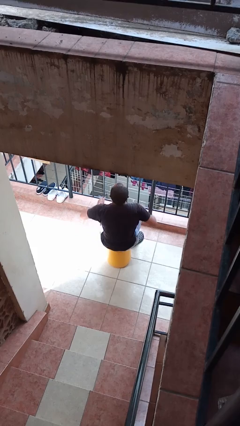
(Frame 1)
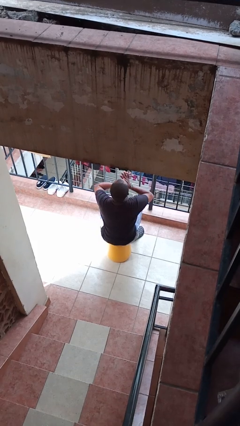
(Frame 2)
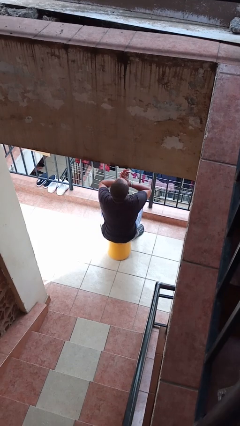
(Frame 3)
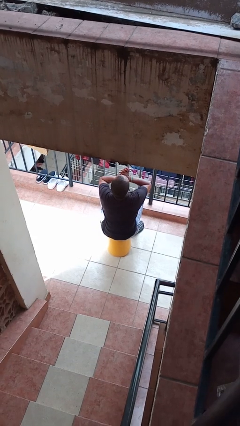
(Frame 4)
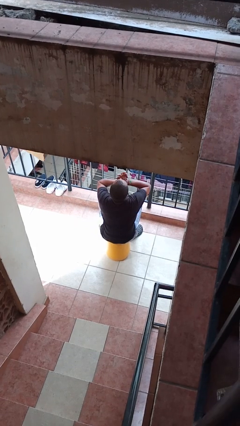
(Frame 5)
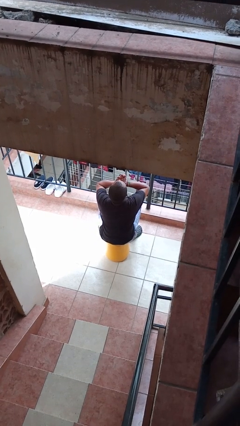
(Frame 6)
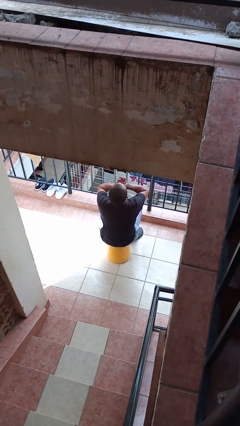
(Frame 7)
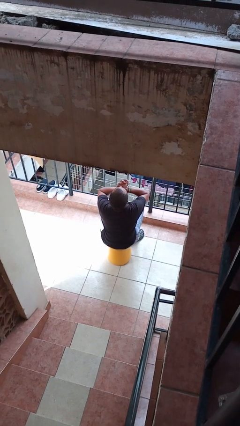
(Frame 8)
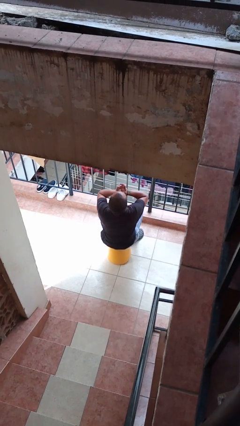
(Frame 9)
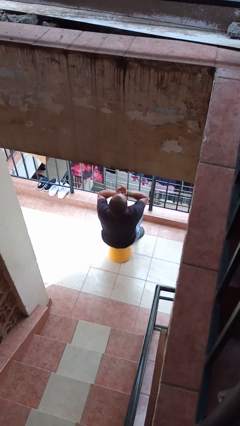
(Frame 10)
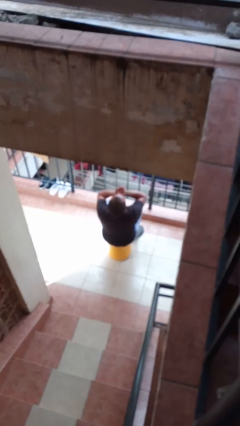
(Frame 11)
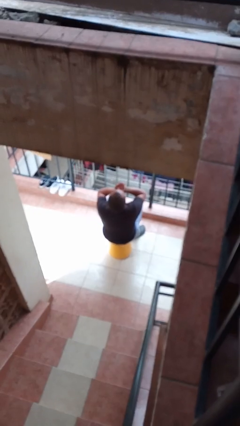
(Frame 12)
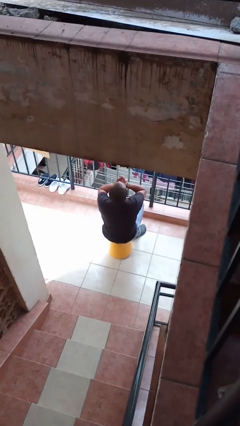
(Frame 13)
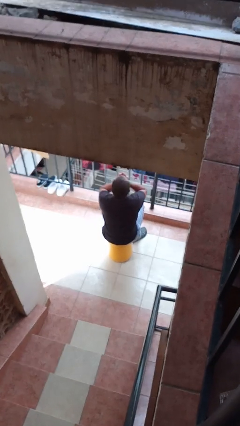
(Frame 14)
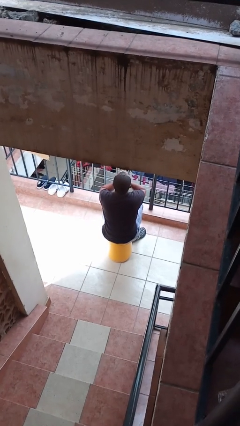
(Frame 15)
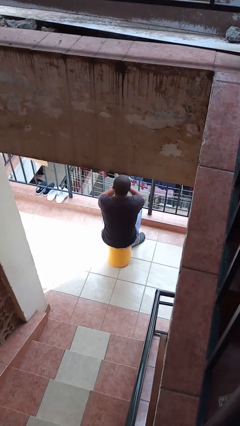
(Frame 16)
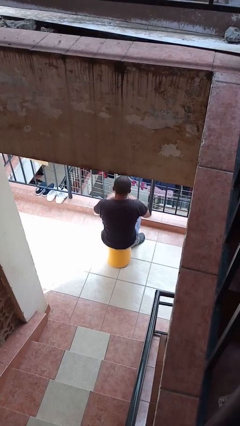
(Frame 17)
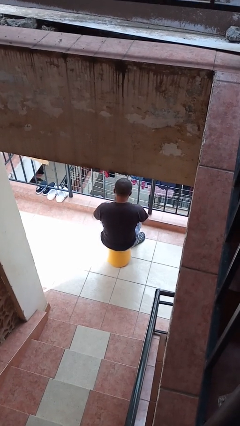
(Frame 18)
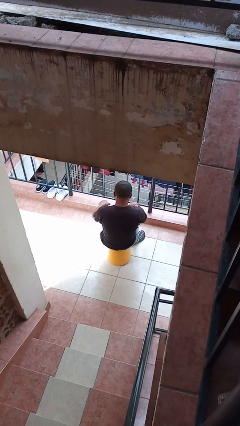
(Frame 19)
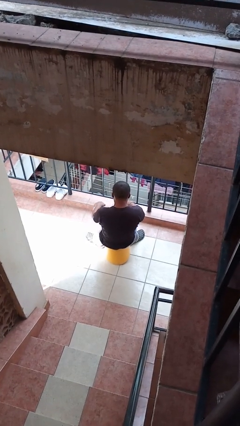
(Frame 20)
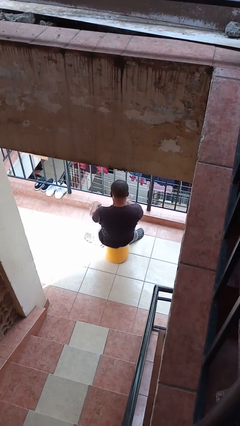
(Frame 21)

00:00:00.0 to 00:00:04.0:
person blows into hands

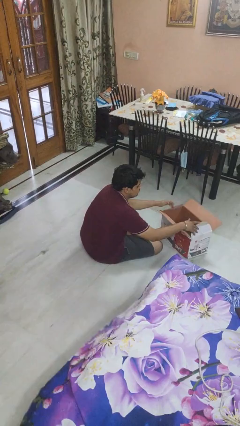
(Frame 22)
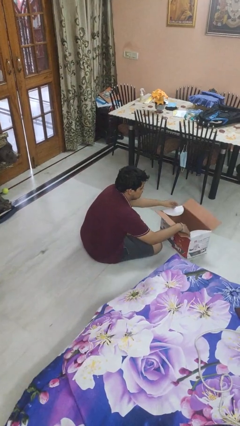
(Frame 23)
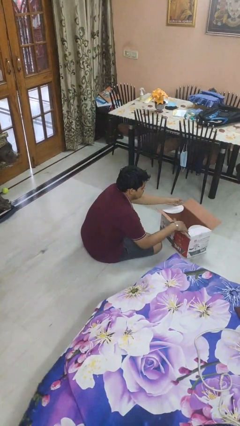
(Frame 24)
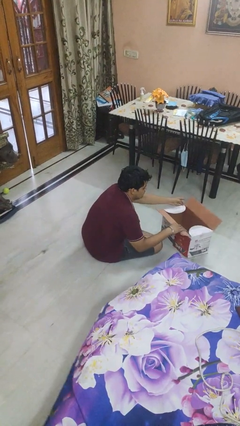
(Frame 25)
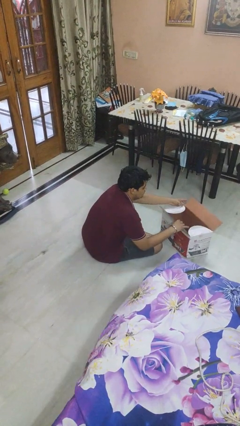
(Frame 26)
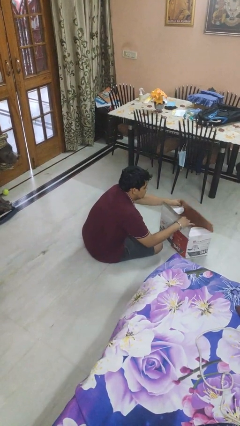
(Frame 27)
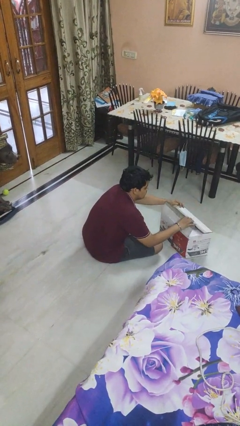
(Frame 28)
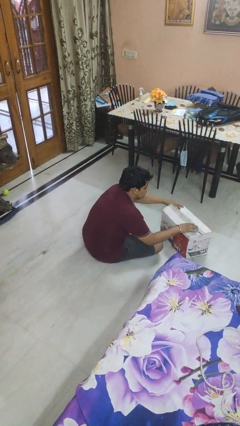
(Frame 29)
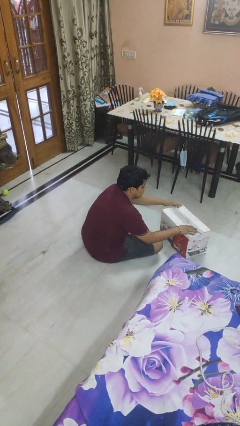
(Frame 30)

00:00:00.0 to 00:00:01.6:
person closes box

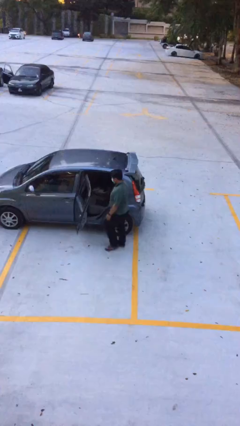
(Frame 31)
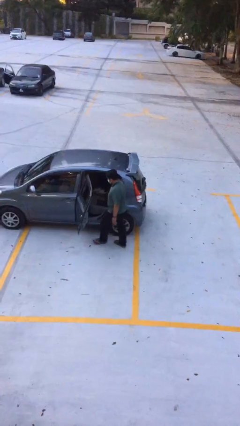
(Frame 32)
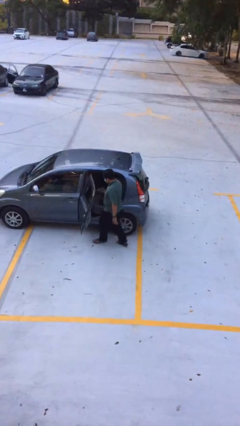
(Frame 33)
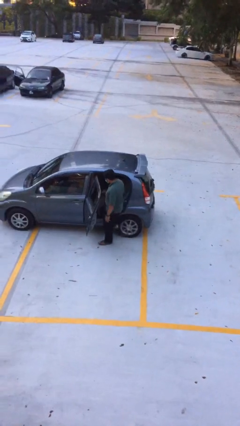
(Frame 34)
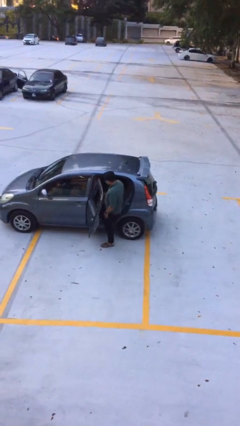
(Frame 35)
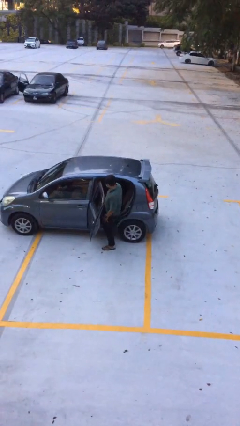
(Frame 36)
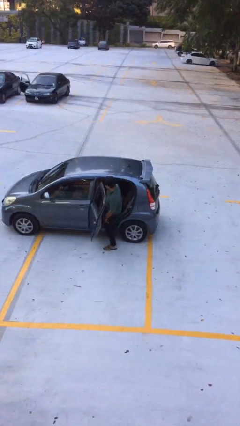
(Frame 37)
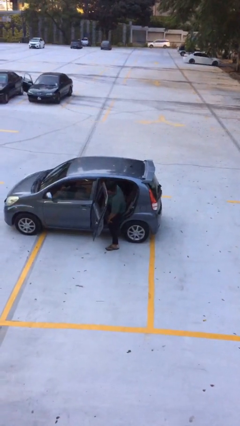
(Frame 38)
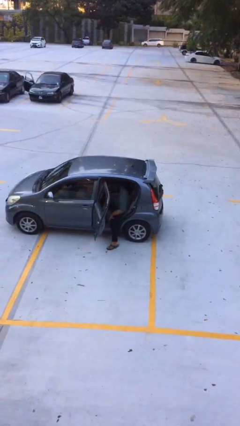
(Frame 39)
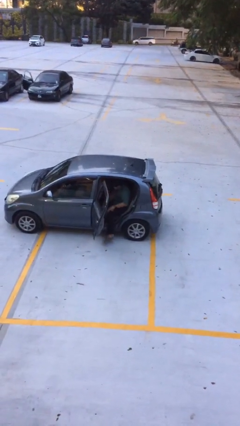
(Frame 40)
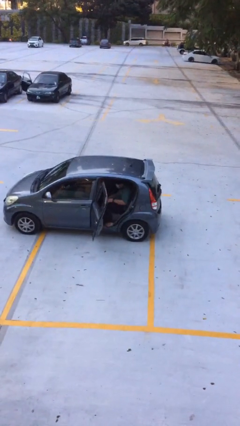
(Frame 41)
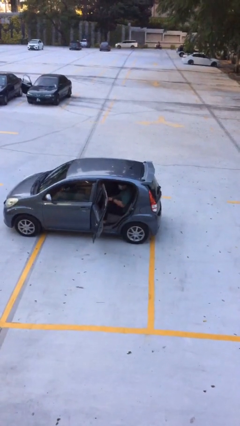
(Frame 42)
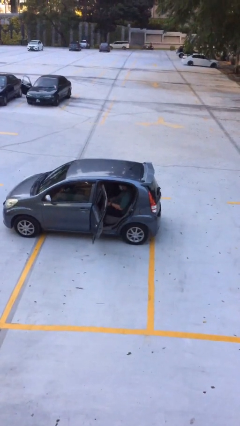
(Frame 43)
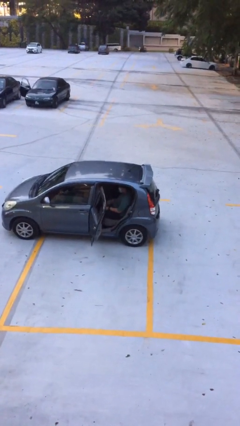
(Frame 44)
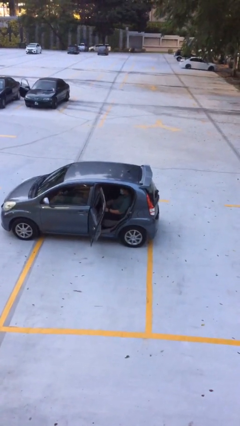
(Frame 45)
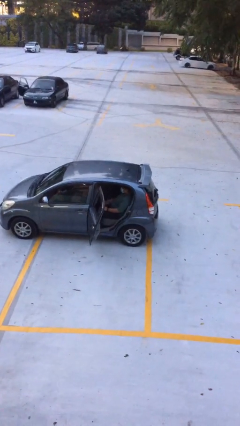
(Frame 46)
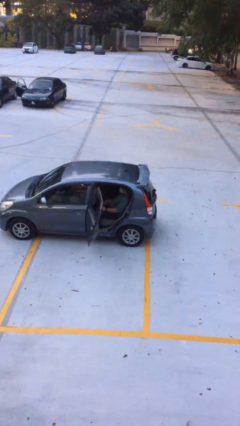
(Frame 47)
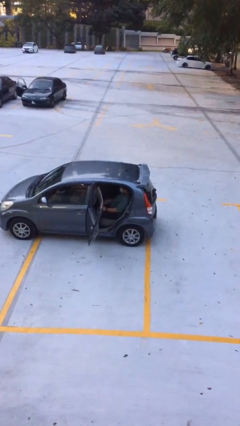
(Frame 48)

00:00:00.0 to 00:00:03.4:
person enters car

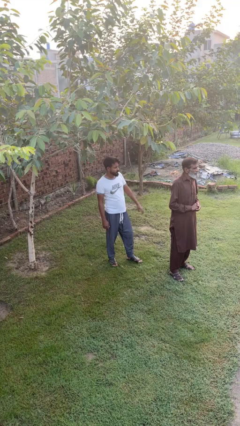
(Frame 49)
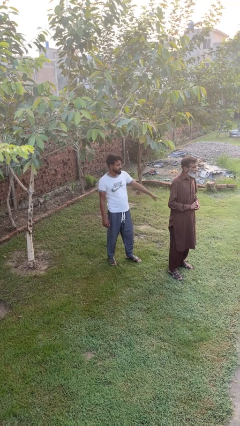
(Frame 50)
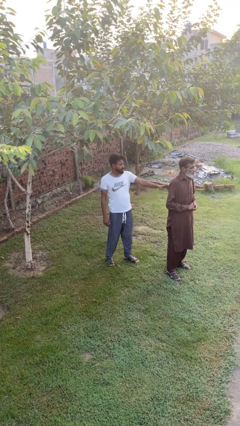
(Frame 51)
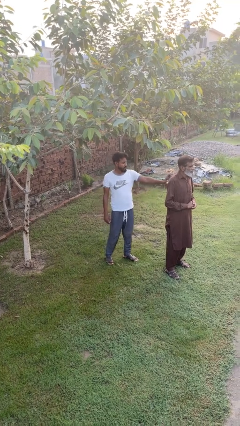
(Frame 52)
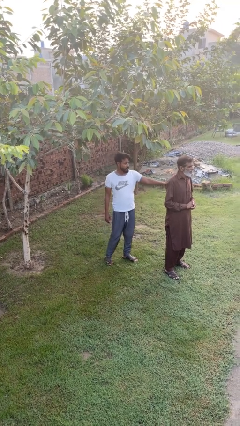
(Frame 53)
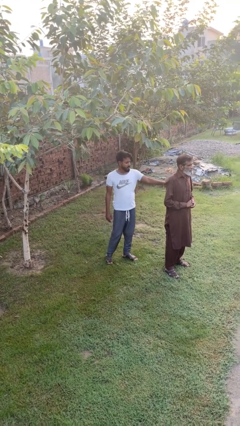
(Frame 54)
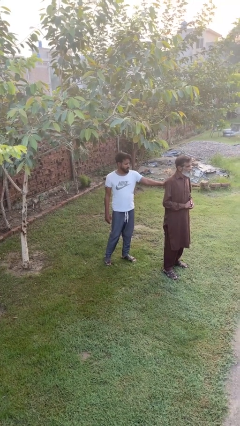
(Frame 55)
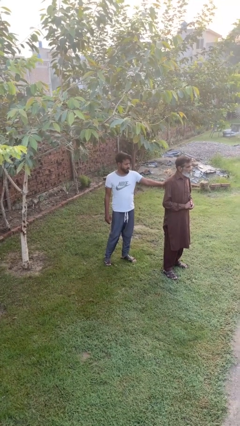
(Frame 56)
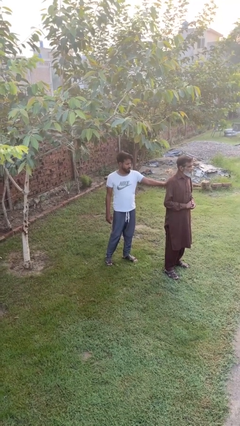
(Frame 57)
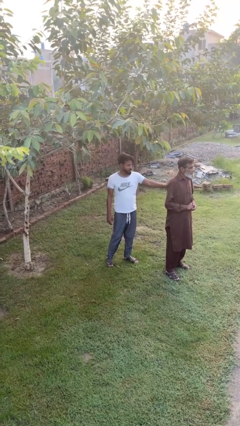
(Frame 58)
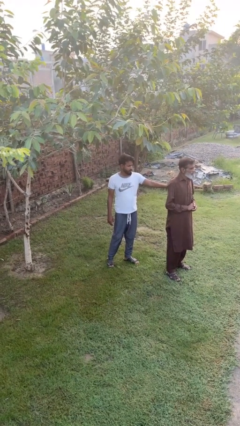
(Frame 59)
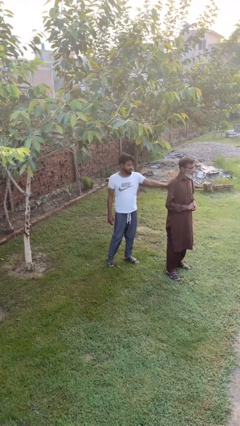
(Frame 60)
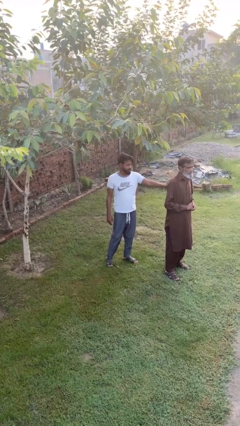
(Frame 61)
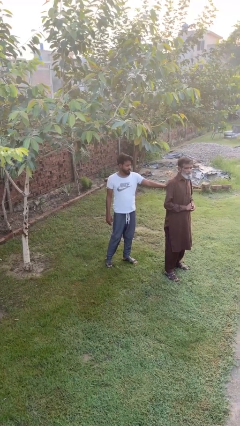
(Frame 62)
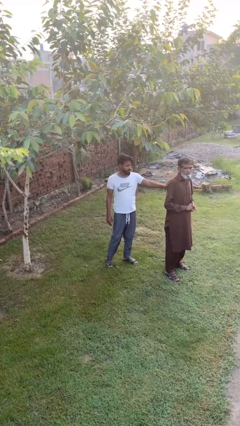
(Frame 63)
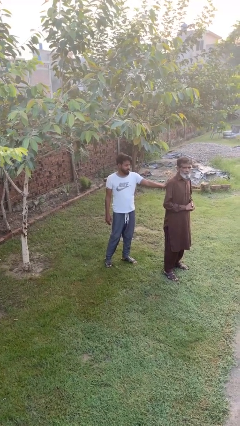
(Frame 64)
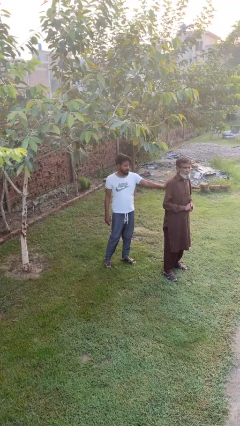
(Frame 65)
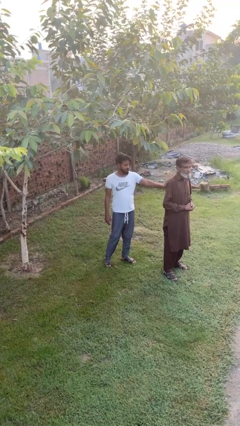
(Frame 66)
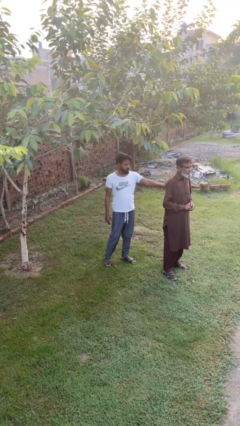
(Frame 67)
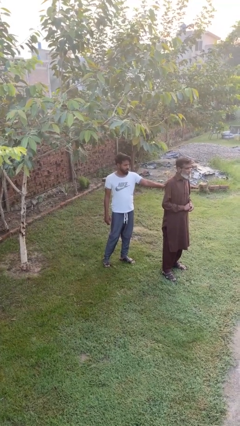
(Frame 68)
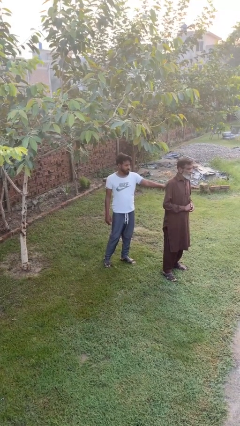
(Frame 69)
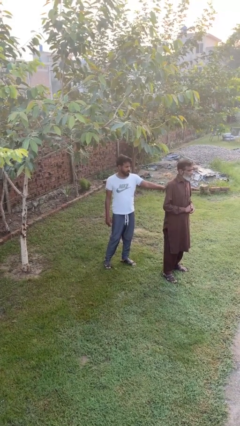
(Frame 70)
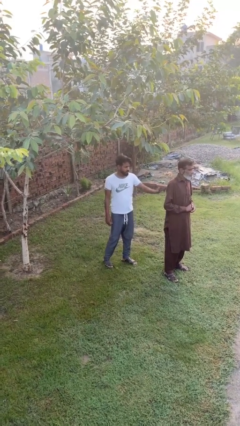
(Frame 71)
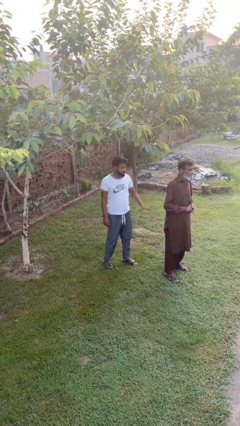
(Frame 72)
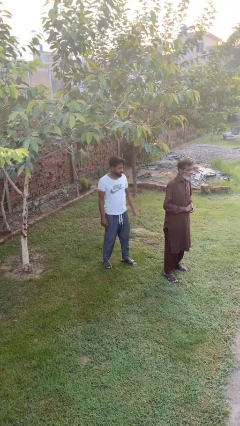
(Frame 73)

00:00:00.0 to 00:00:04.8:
person touches back of person

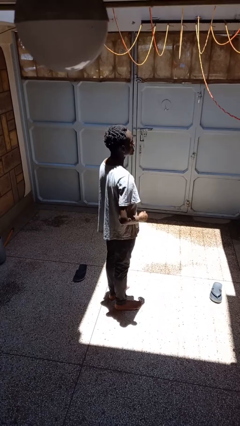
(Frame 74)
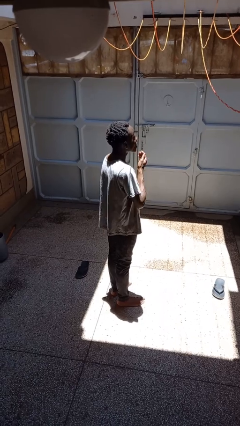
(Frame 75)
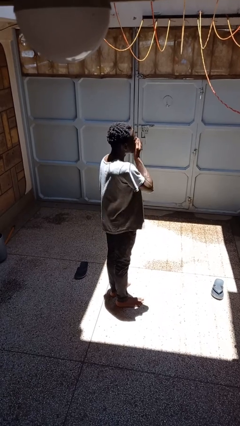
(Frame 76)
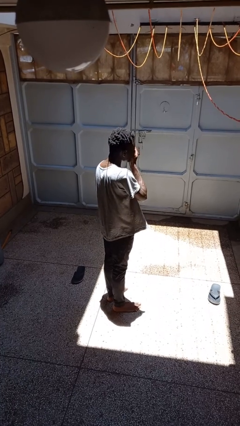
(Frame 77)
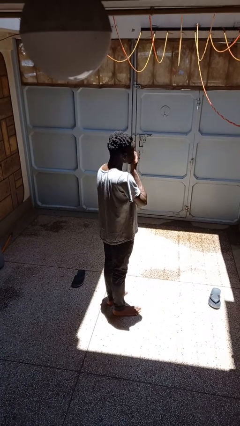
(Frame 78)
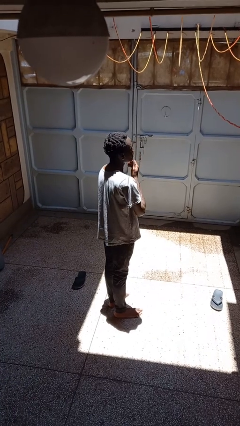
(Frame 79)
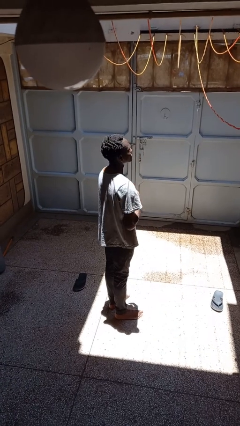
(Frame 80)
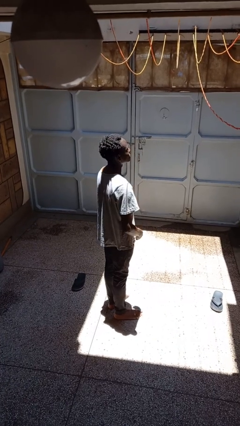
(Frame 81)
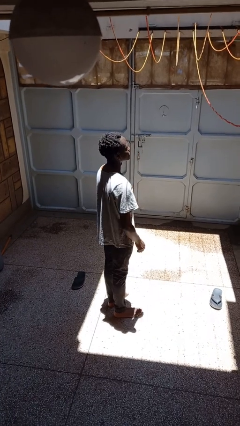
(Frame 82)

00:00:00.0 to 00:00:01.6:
person sneezes into hand

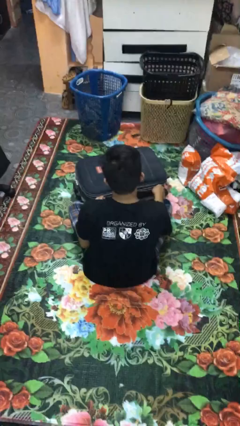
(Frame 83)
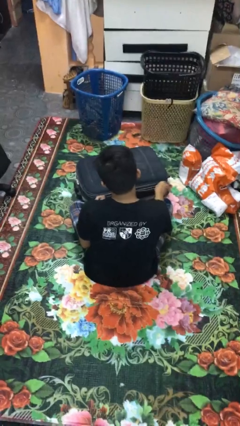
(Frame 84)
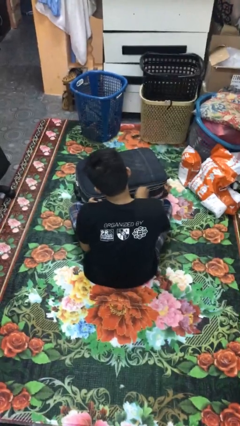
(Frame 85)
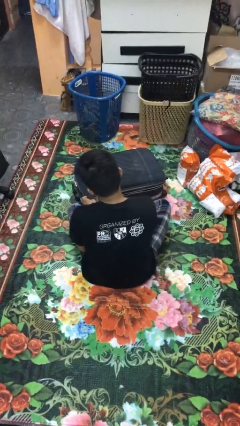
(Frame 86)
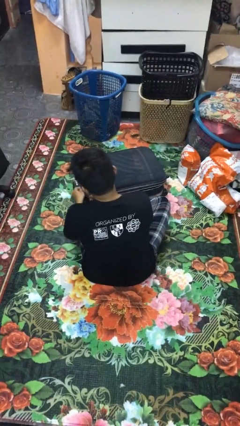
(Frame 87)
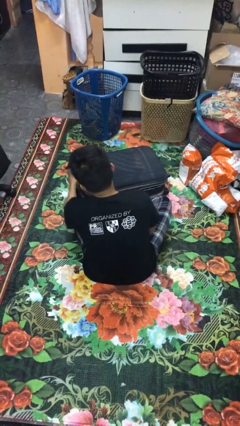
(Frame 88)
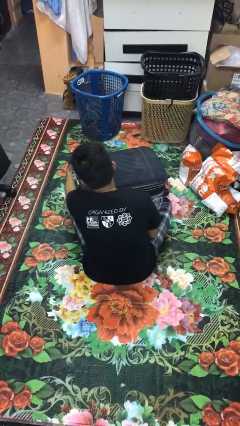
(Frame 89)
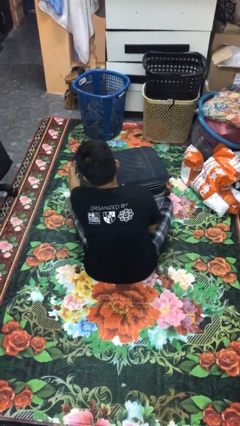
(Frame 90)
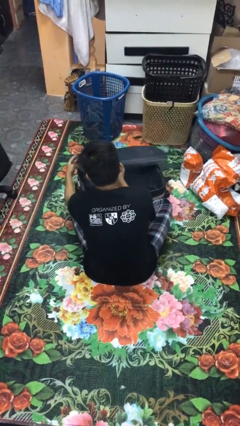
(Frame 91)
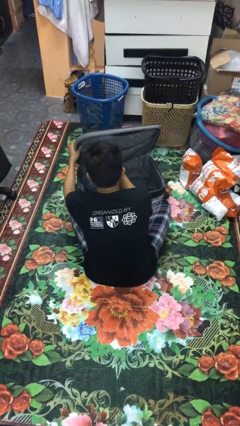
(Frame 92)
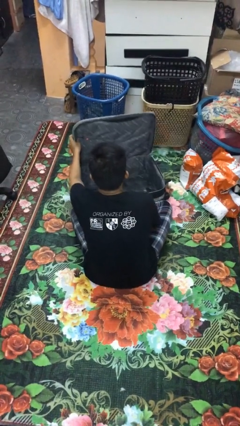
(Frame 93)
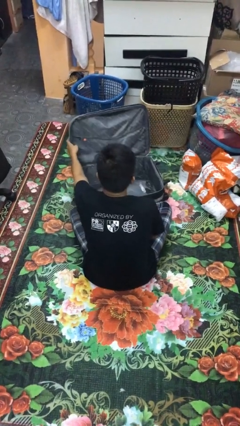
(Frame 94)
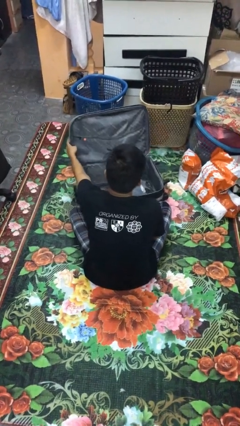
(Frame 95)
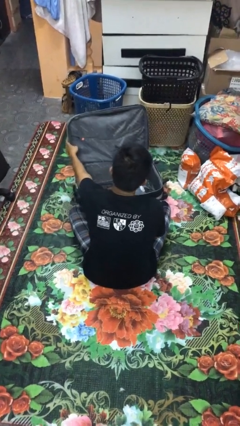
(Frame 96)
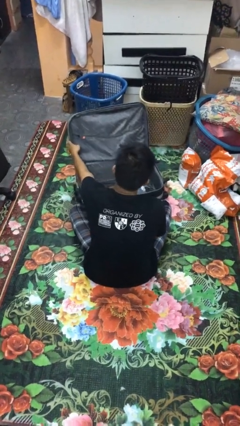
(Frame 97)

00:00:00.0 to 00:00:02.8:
person opens suitcase
